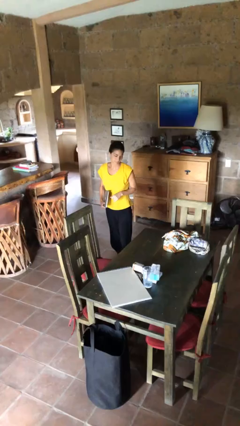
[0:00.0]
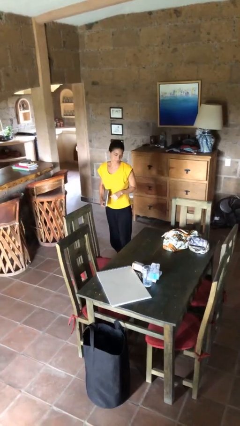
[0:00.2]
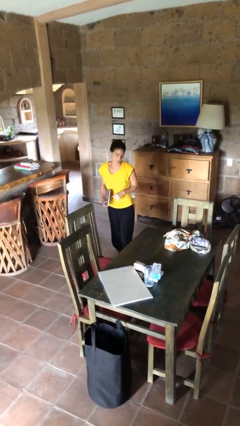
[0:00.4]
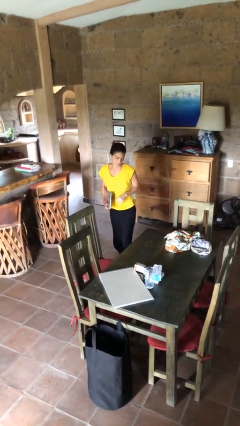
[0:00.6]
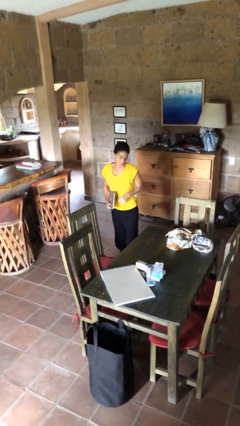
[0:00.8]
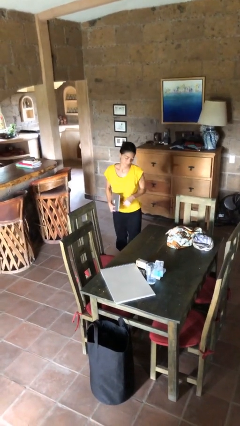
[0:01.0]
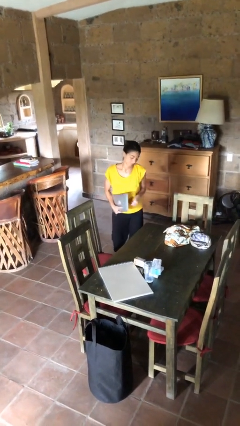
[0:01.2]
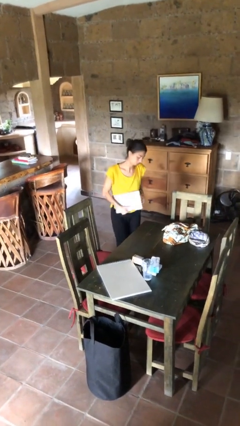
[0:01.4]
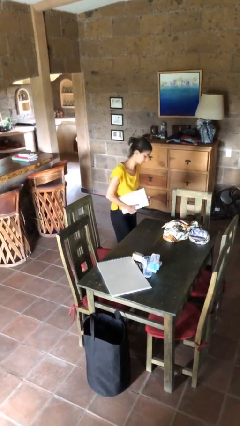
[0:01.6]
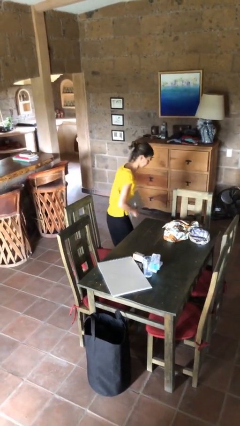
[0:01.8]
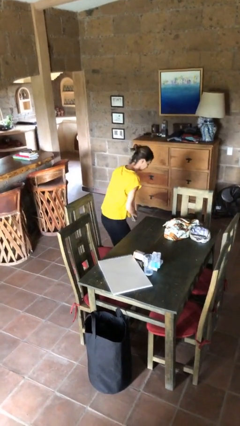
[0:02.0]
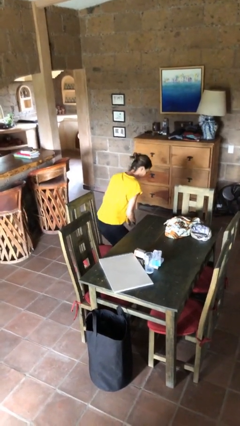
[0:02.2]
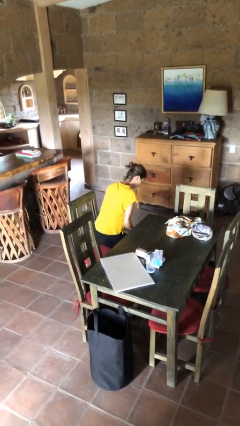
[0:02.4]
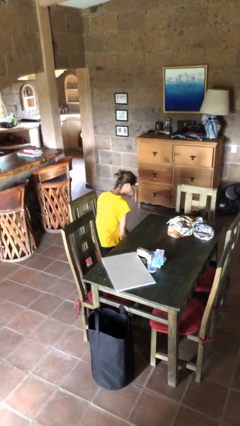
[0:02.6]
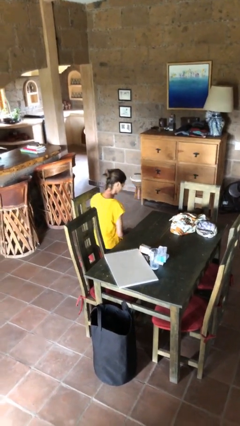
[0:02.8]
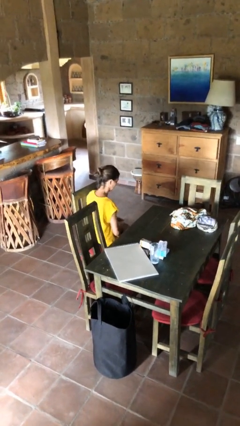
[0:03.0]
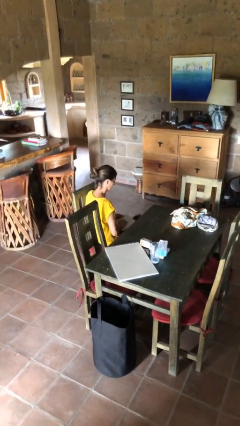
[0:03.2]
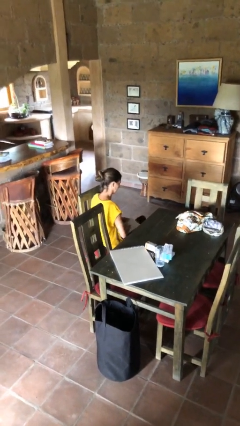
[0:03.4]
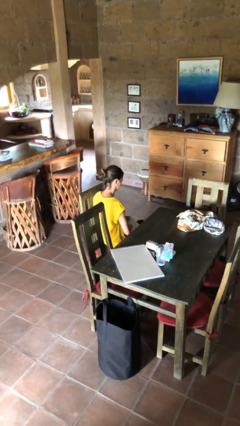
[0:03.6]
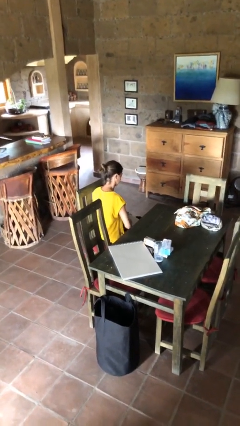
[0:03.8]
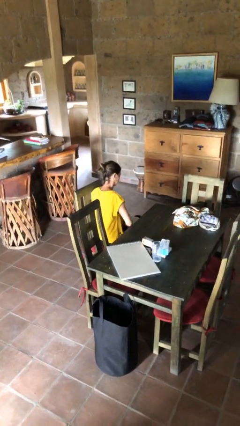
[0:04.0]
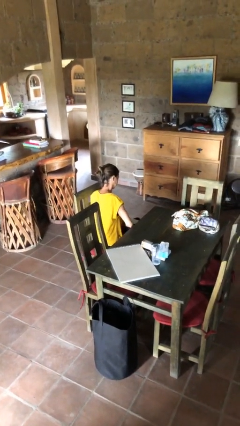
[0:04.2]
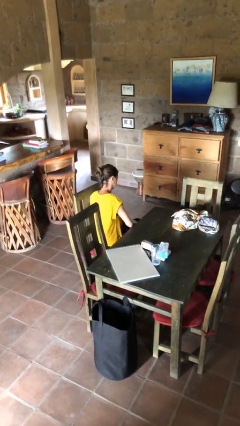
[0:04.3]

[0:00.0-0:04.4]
person sits down

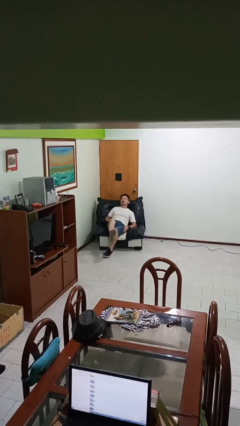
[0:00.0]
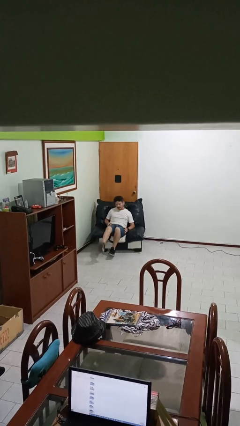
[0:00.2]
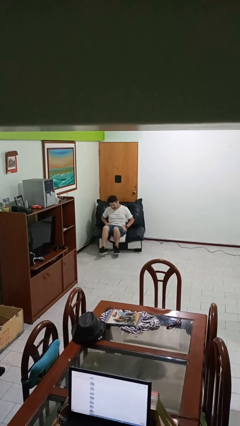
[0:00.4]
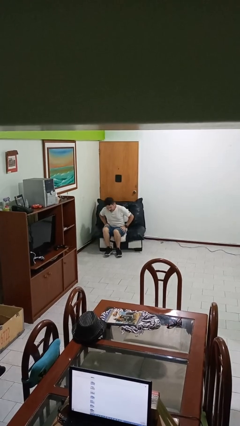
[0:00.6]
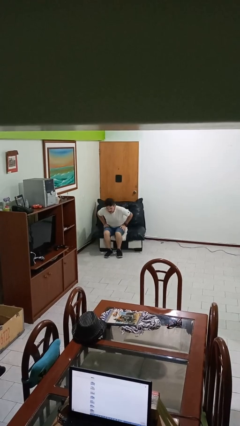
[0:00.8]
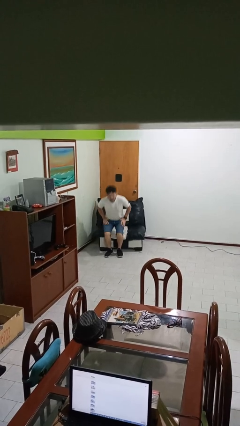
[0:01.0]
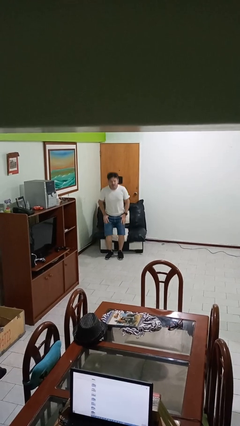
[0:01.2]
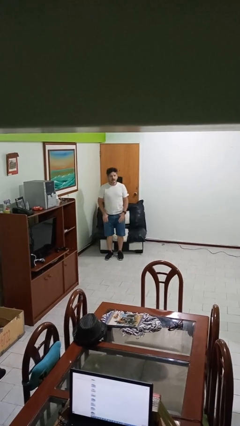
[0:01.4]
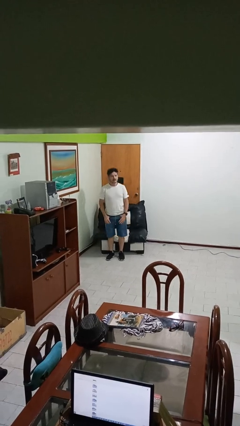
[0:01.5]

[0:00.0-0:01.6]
person stands up

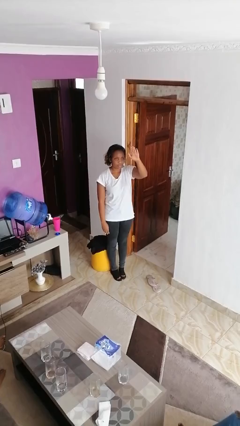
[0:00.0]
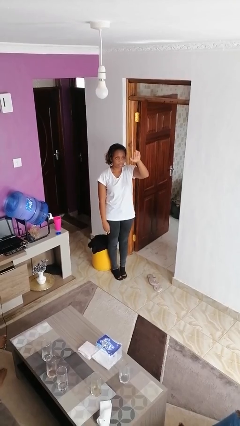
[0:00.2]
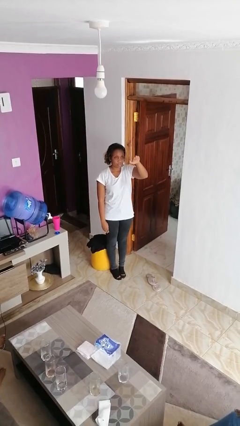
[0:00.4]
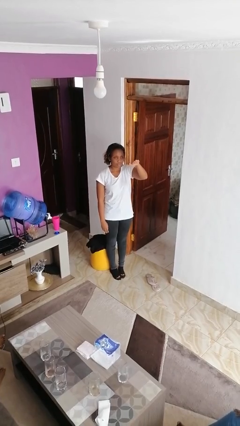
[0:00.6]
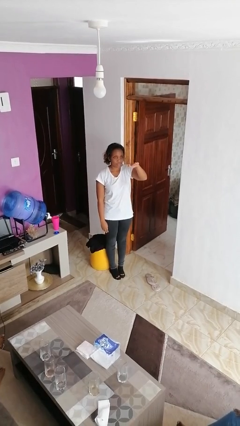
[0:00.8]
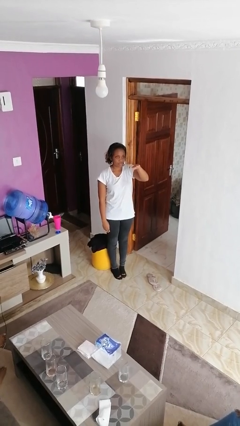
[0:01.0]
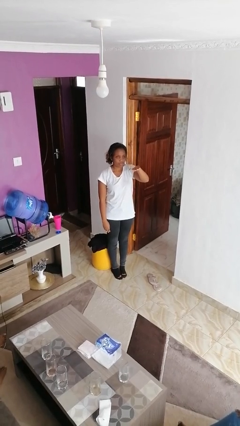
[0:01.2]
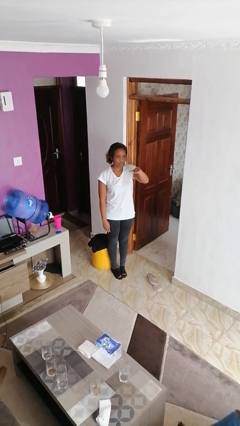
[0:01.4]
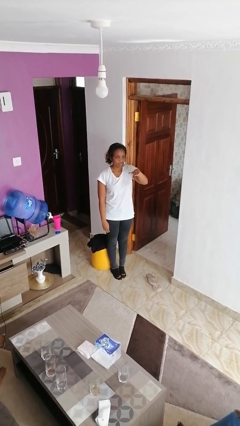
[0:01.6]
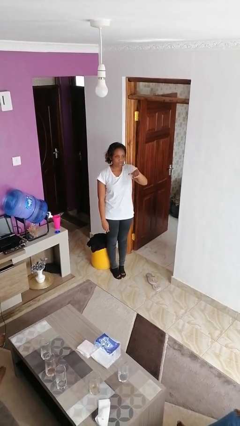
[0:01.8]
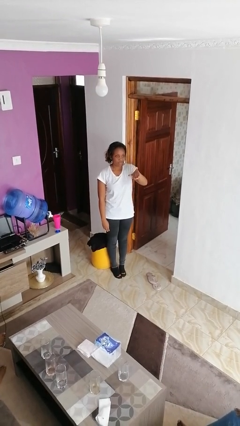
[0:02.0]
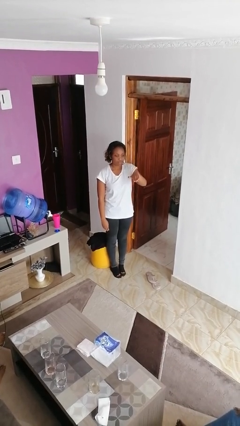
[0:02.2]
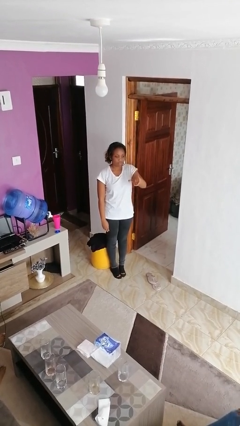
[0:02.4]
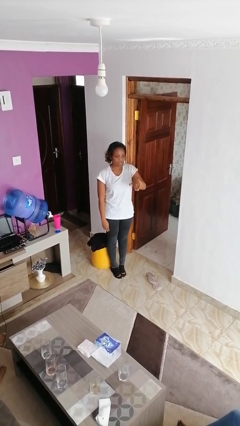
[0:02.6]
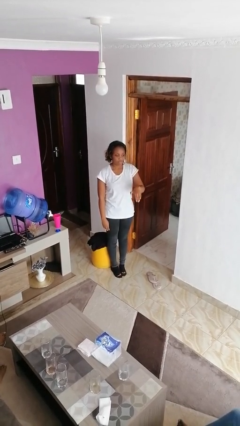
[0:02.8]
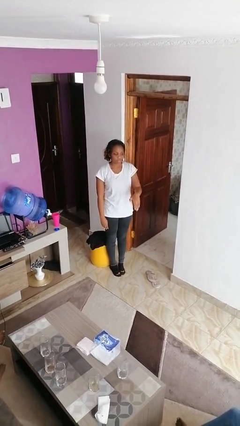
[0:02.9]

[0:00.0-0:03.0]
person gestures swipe down

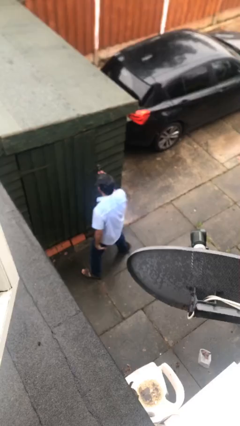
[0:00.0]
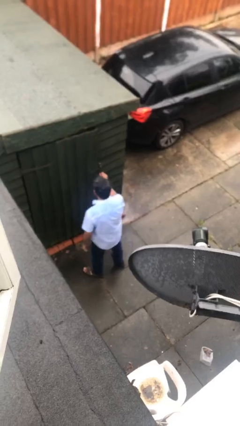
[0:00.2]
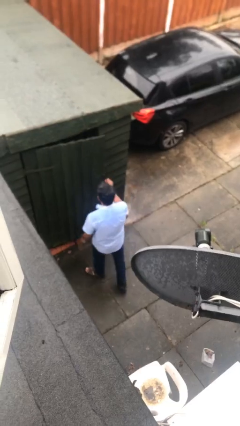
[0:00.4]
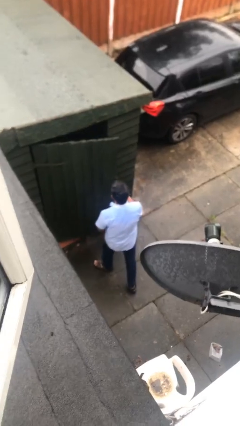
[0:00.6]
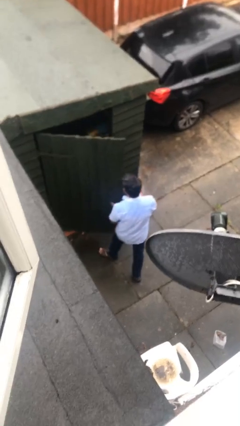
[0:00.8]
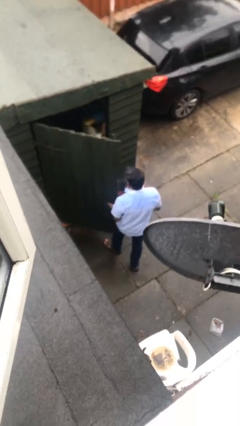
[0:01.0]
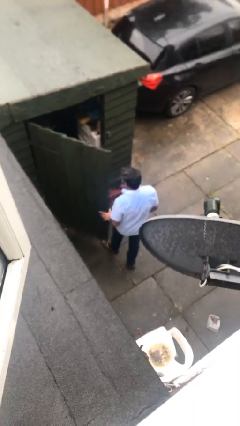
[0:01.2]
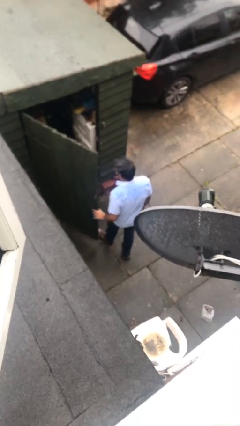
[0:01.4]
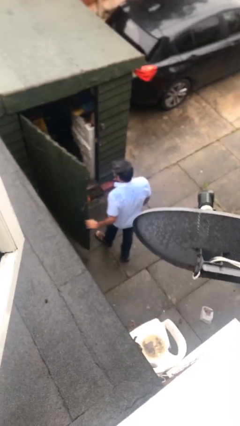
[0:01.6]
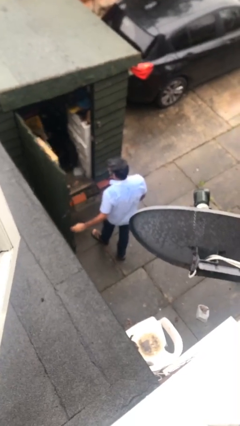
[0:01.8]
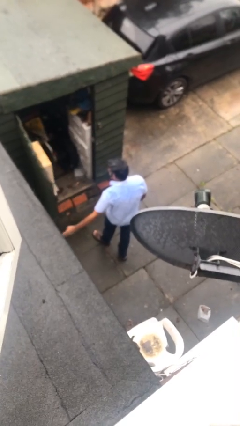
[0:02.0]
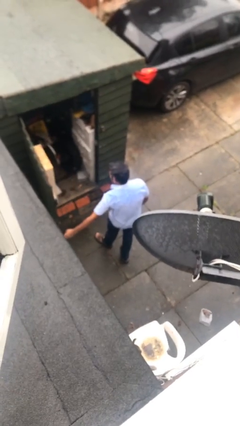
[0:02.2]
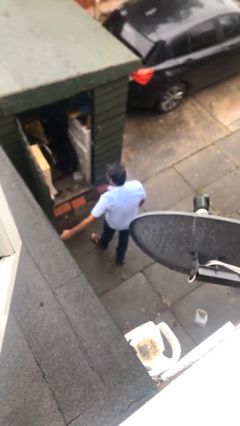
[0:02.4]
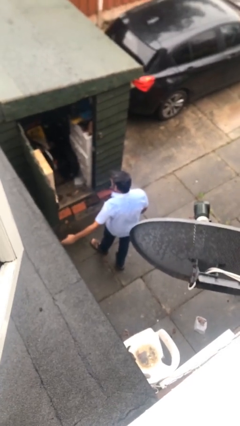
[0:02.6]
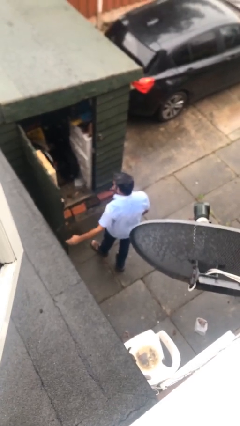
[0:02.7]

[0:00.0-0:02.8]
person opens facility door

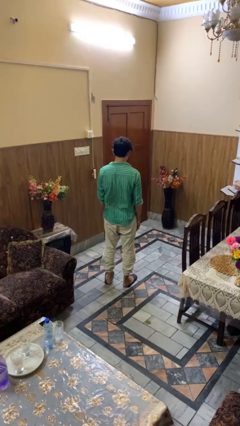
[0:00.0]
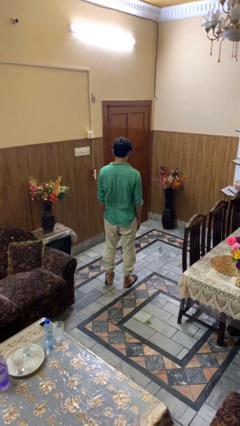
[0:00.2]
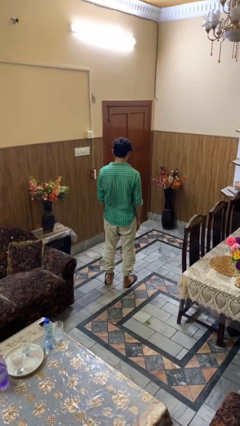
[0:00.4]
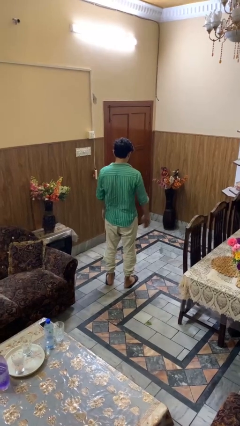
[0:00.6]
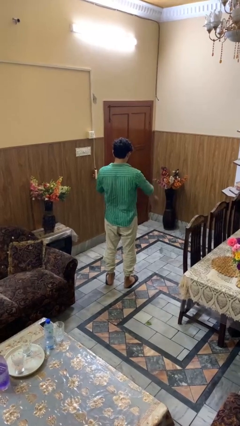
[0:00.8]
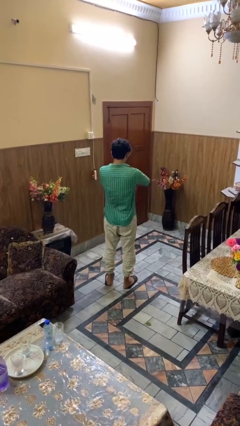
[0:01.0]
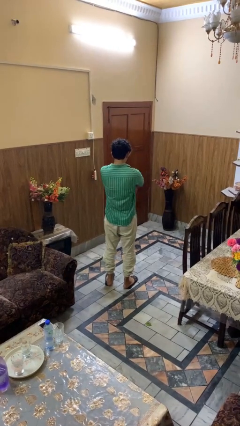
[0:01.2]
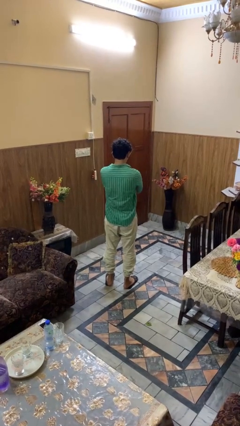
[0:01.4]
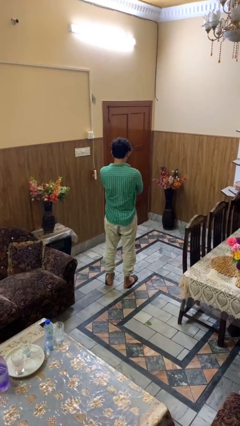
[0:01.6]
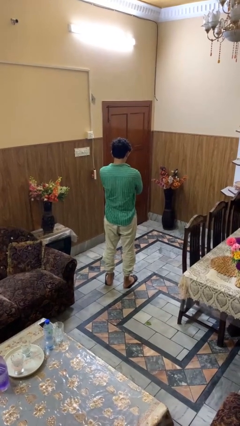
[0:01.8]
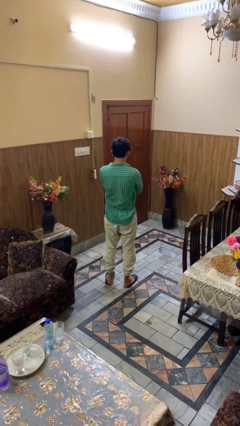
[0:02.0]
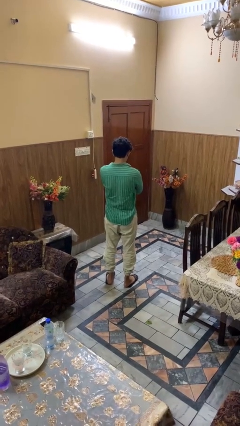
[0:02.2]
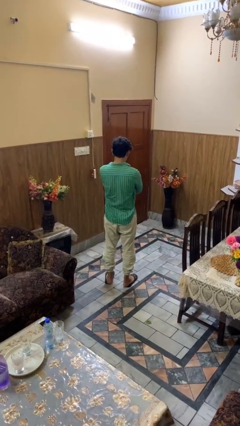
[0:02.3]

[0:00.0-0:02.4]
person crosses arms

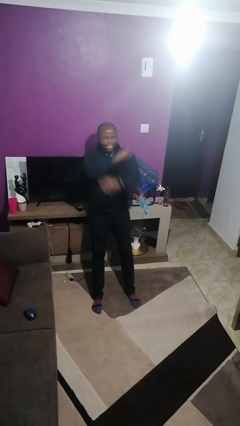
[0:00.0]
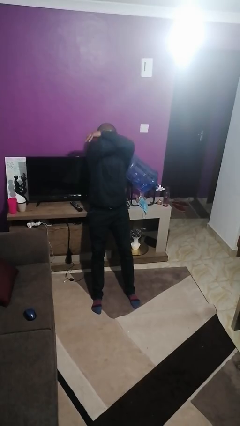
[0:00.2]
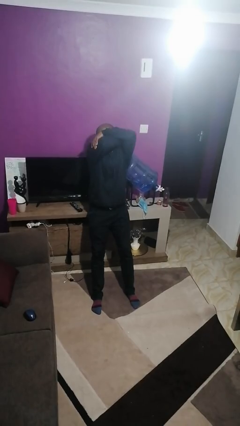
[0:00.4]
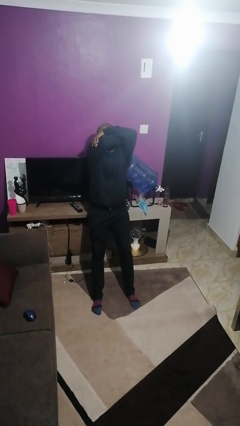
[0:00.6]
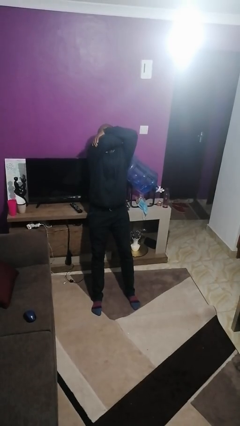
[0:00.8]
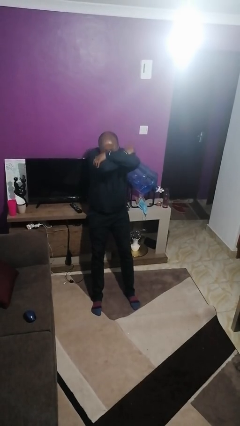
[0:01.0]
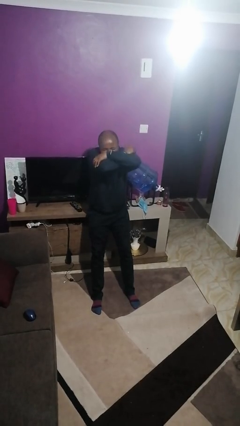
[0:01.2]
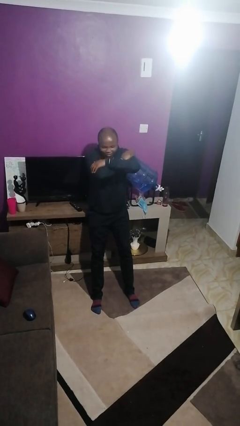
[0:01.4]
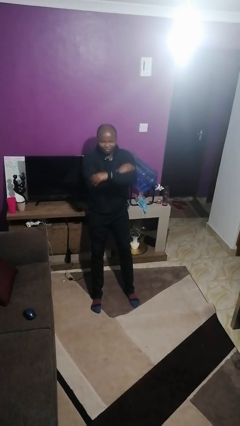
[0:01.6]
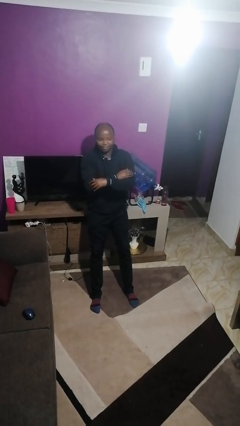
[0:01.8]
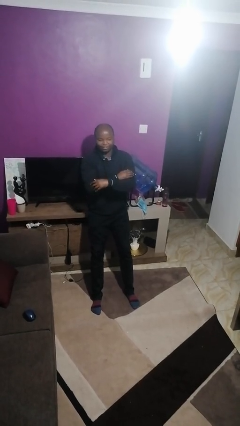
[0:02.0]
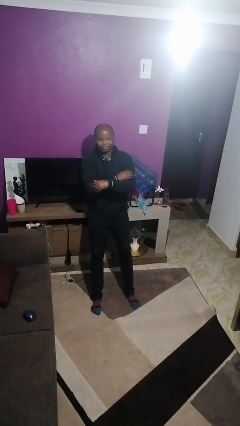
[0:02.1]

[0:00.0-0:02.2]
person sneezes into hand

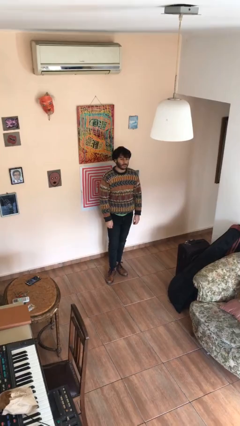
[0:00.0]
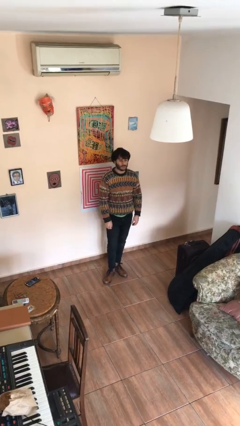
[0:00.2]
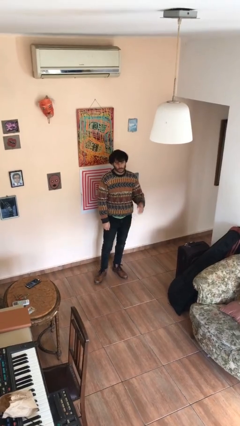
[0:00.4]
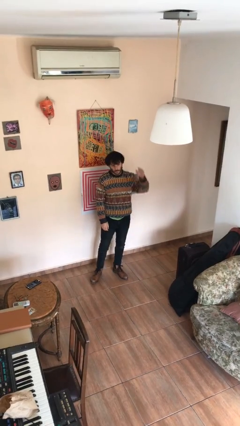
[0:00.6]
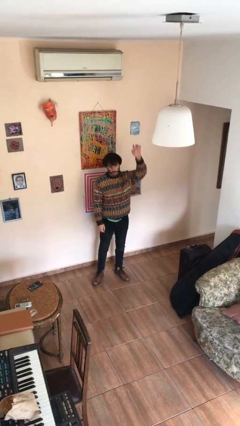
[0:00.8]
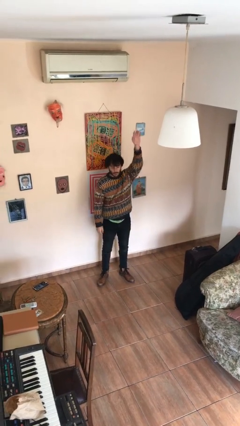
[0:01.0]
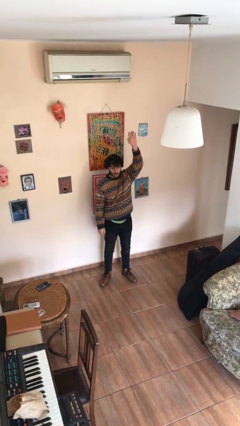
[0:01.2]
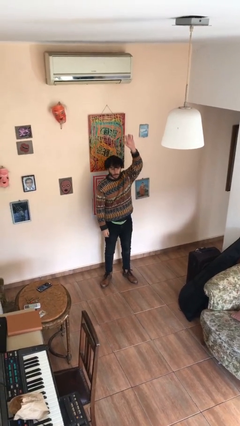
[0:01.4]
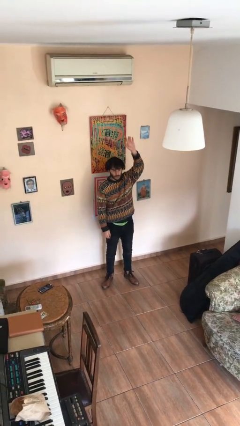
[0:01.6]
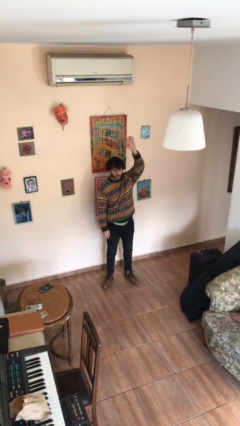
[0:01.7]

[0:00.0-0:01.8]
person gestures raise hand
